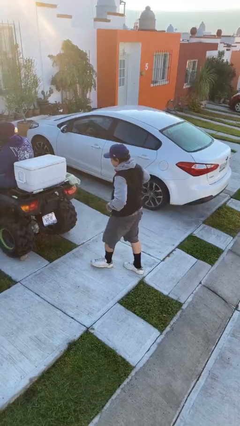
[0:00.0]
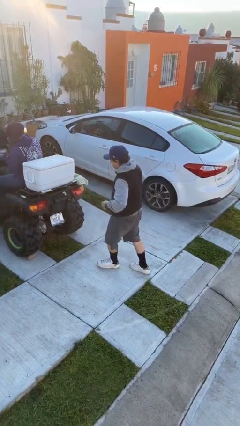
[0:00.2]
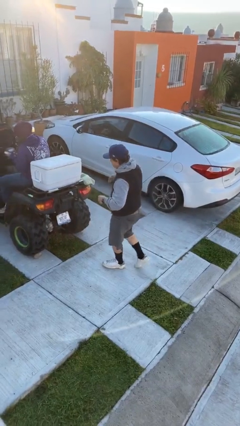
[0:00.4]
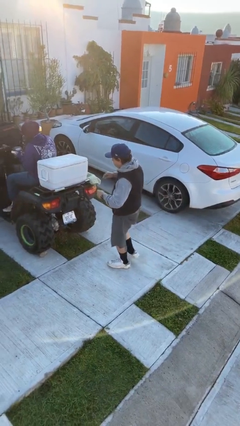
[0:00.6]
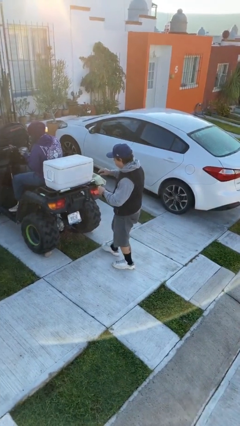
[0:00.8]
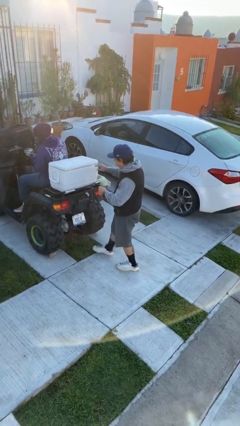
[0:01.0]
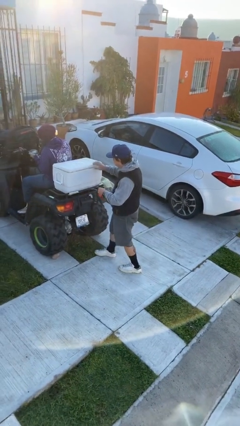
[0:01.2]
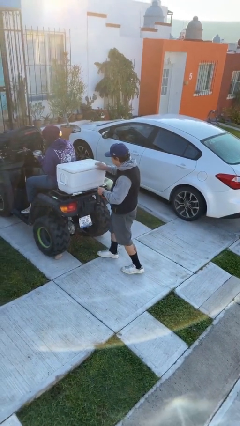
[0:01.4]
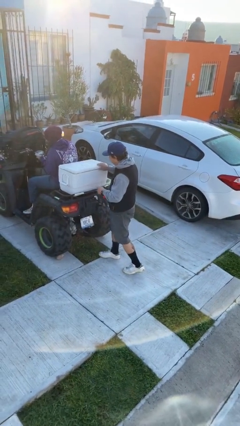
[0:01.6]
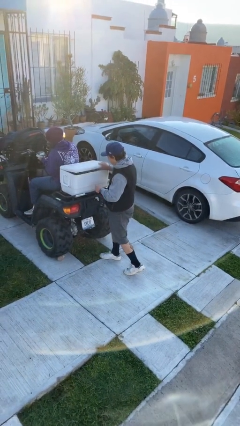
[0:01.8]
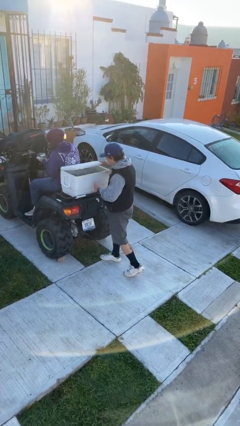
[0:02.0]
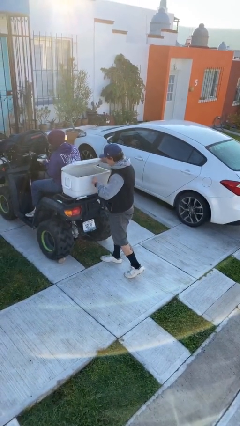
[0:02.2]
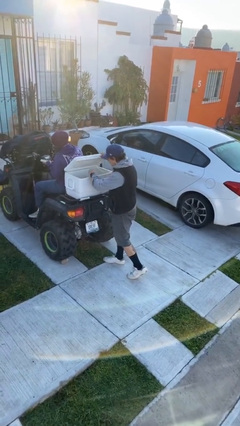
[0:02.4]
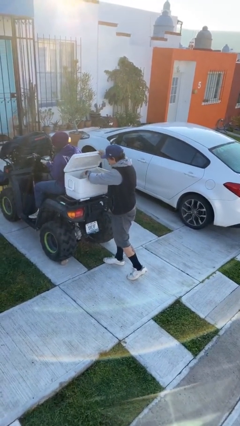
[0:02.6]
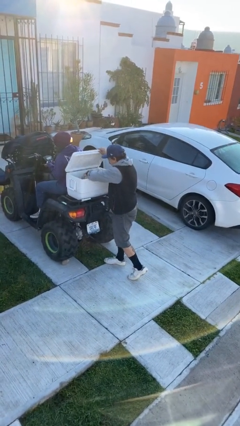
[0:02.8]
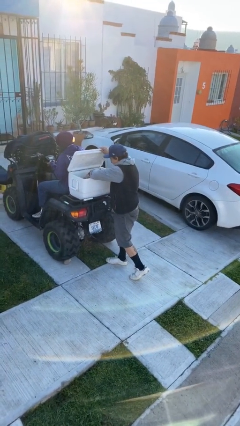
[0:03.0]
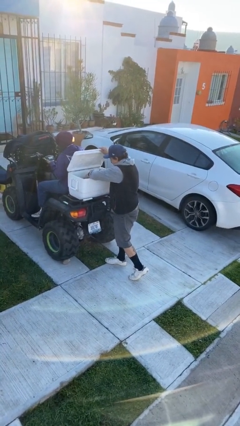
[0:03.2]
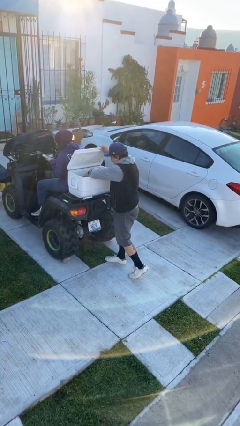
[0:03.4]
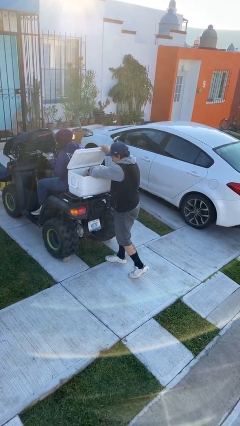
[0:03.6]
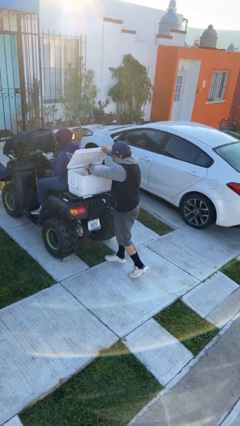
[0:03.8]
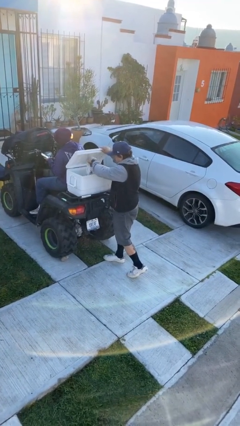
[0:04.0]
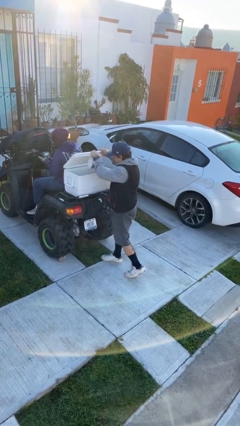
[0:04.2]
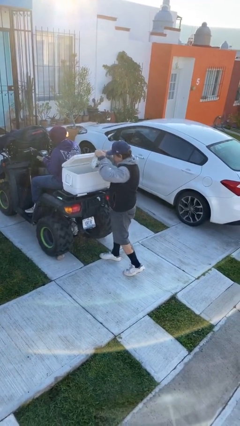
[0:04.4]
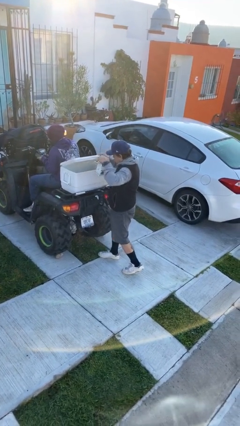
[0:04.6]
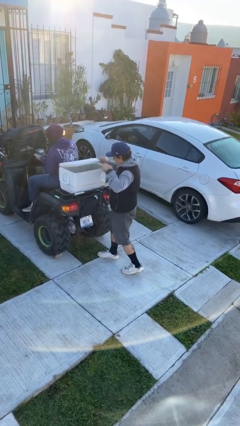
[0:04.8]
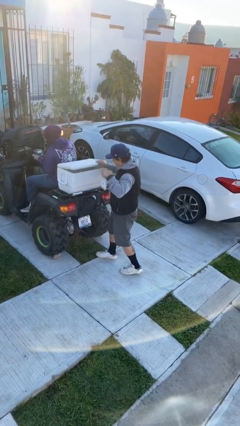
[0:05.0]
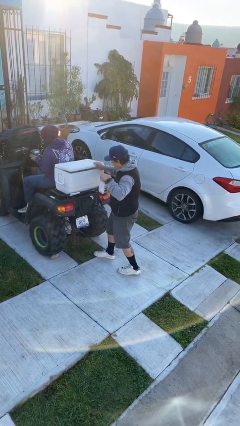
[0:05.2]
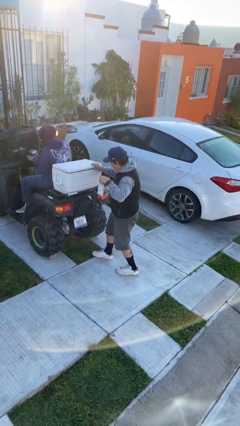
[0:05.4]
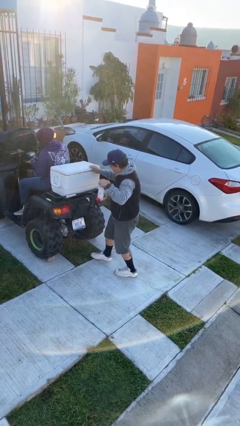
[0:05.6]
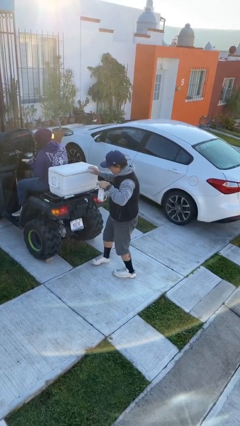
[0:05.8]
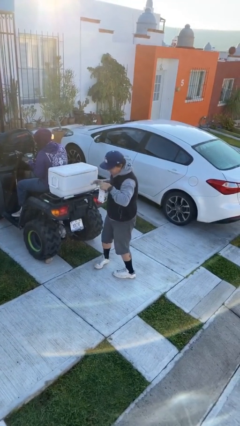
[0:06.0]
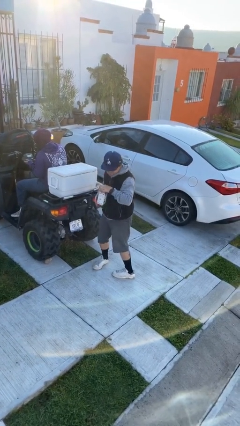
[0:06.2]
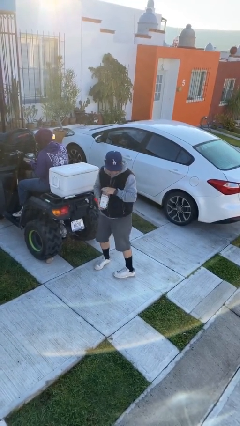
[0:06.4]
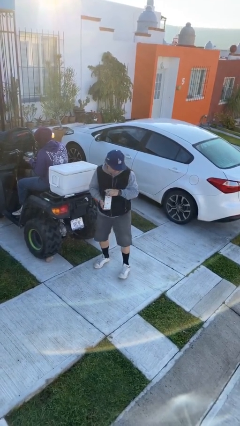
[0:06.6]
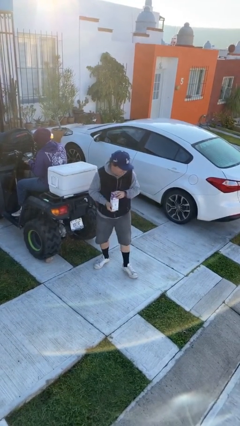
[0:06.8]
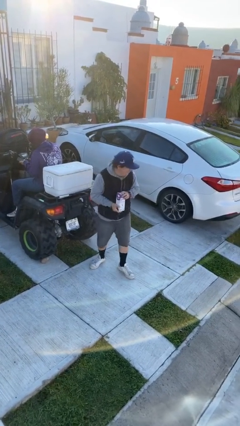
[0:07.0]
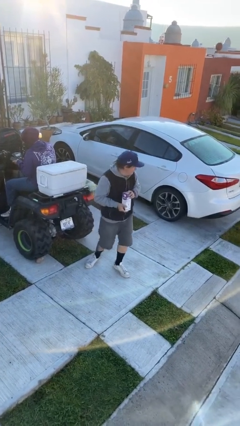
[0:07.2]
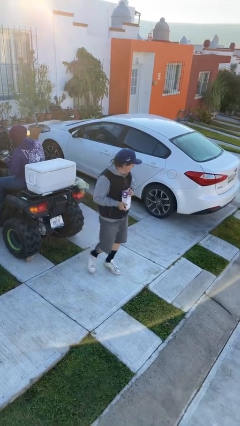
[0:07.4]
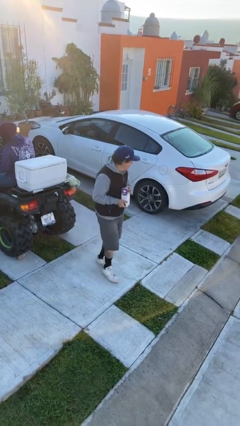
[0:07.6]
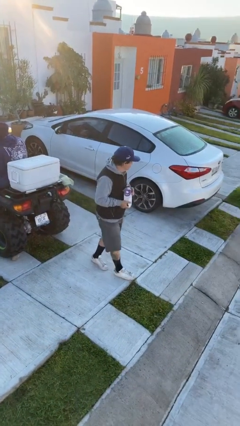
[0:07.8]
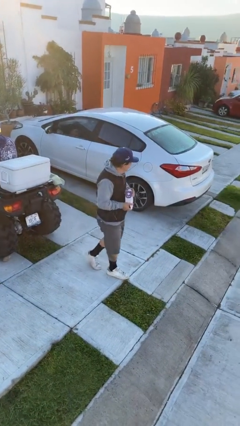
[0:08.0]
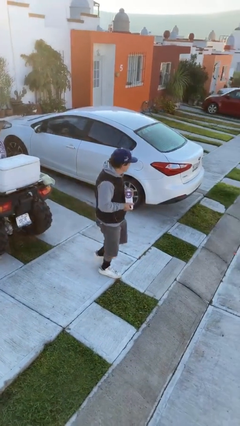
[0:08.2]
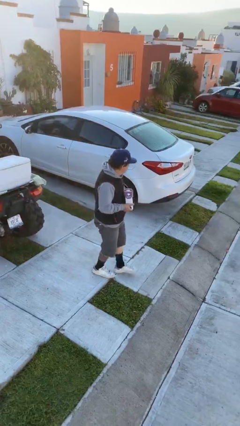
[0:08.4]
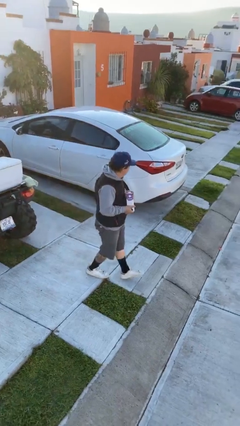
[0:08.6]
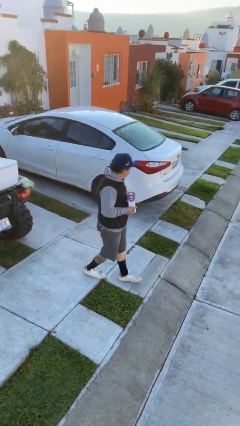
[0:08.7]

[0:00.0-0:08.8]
person steals object from person

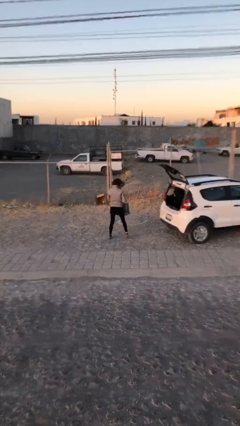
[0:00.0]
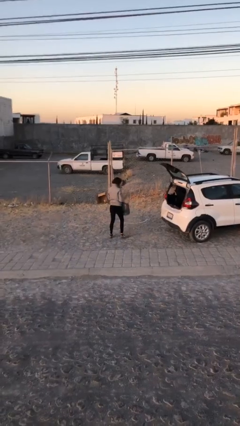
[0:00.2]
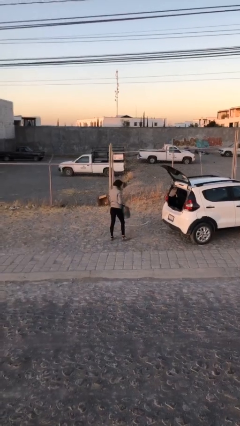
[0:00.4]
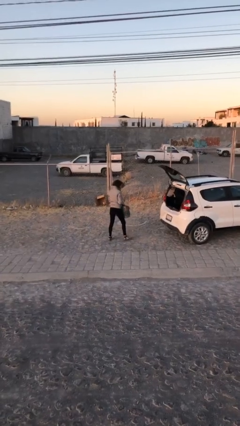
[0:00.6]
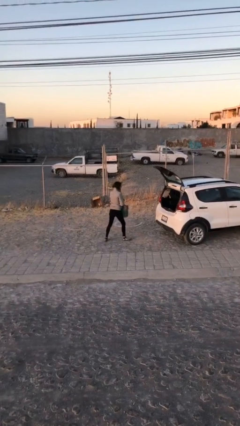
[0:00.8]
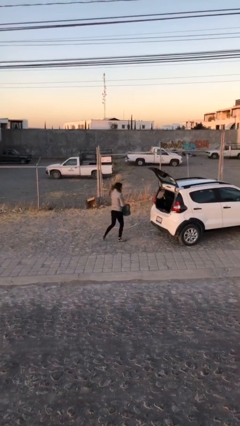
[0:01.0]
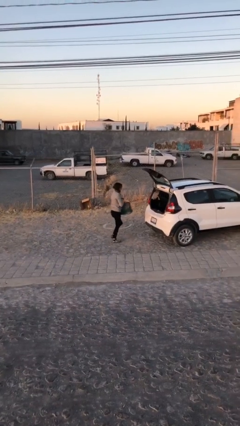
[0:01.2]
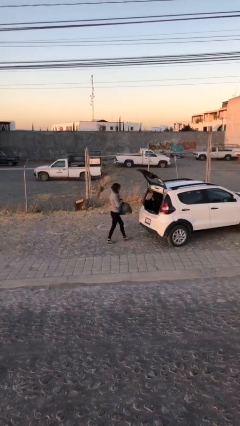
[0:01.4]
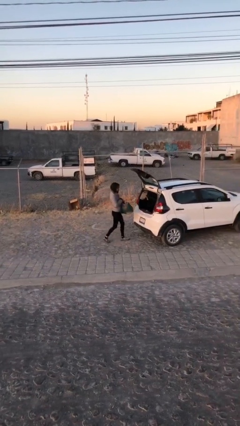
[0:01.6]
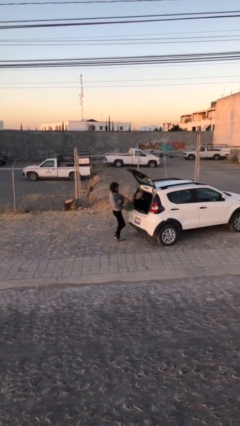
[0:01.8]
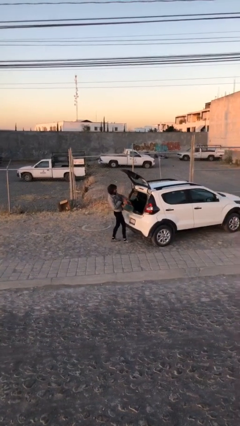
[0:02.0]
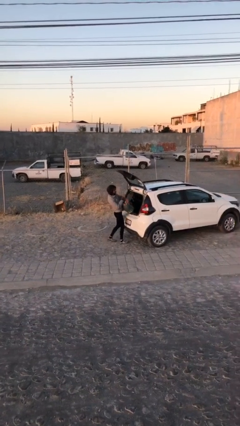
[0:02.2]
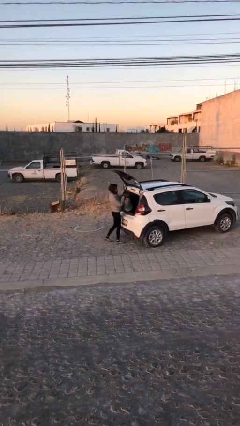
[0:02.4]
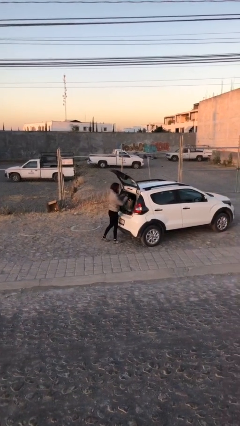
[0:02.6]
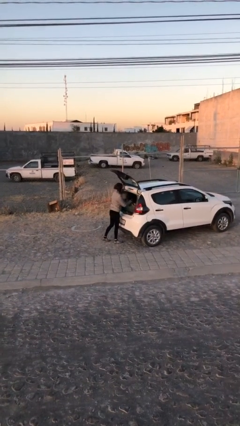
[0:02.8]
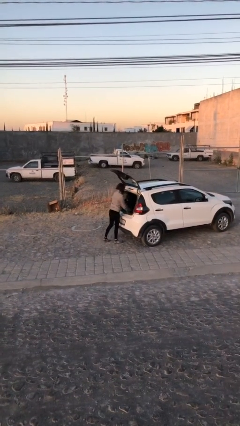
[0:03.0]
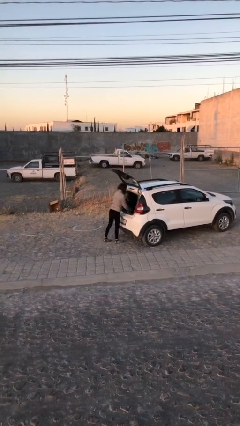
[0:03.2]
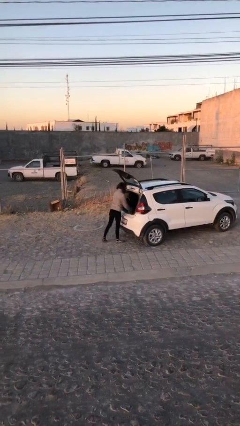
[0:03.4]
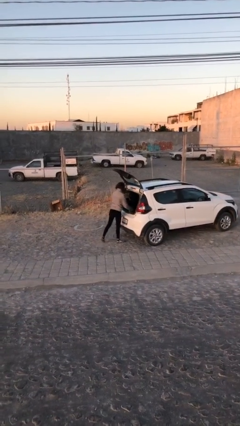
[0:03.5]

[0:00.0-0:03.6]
person loads car

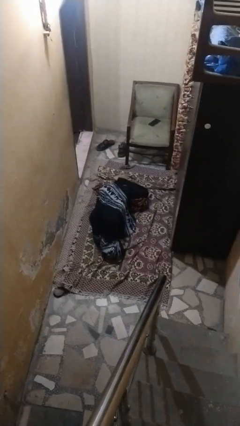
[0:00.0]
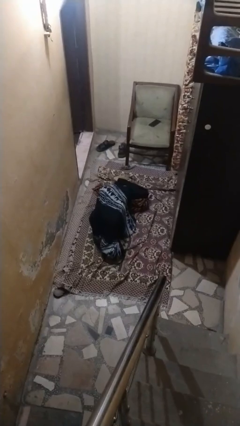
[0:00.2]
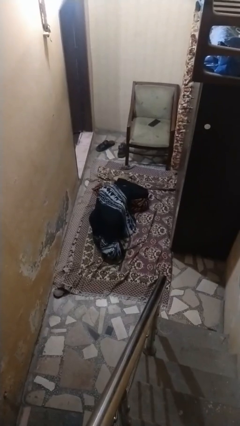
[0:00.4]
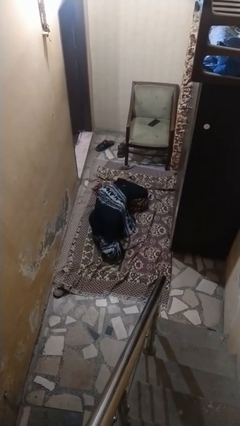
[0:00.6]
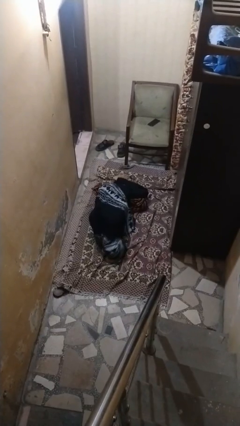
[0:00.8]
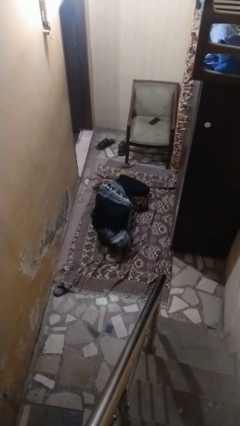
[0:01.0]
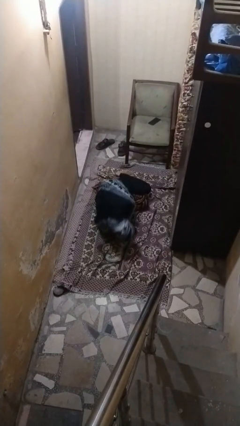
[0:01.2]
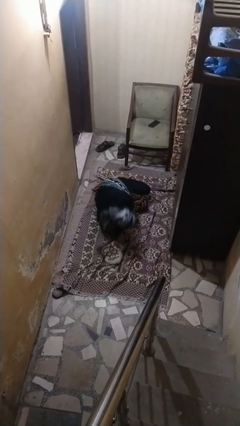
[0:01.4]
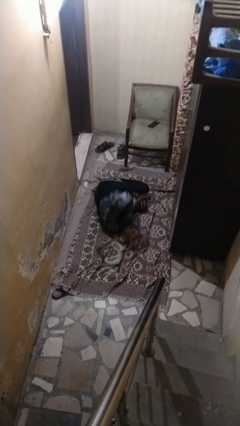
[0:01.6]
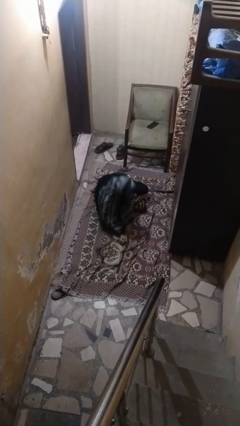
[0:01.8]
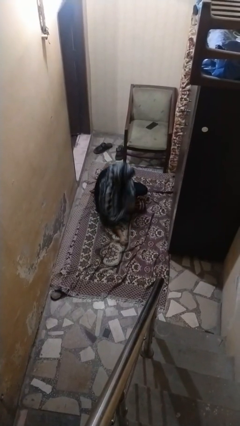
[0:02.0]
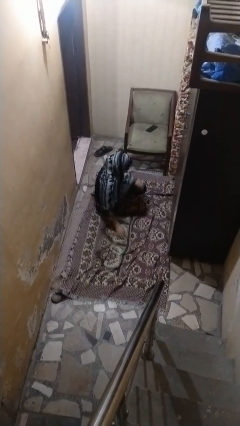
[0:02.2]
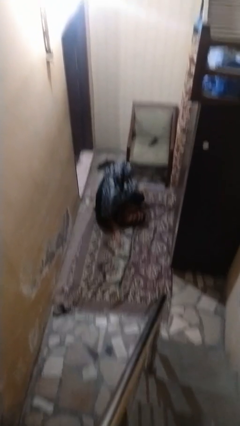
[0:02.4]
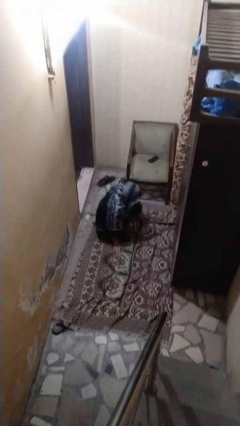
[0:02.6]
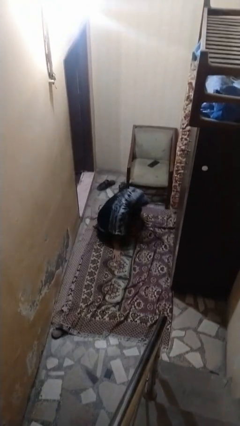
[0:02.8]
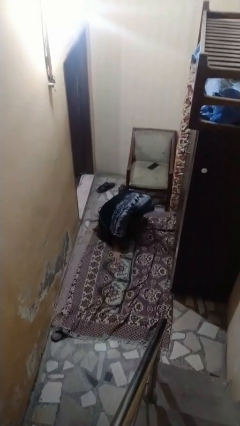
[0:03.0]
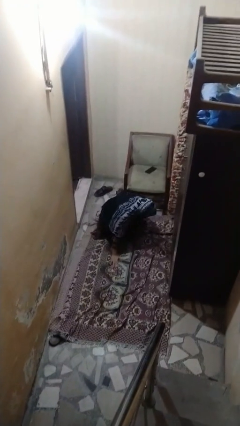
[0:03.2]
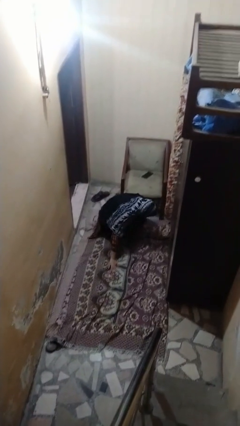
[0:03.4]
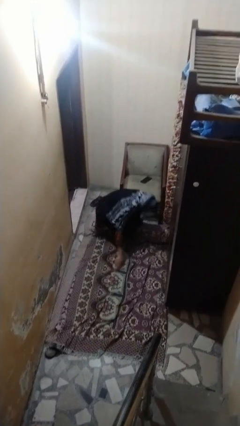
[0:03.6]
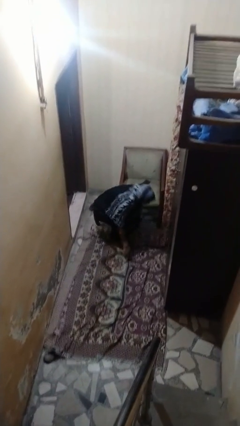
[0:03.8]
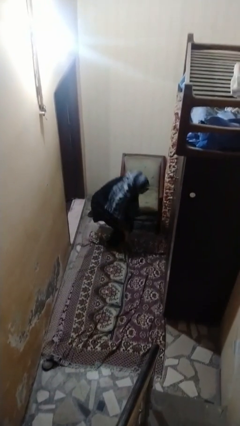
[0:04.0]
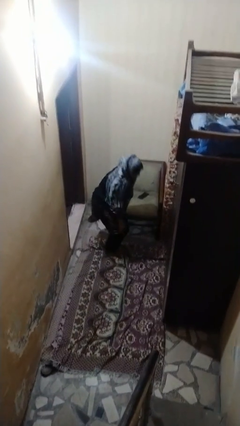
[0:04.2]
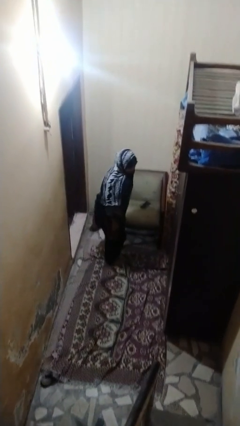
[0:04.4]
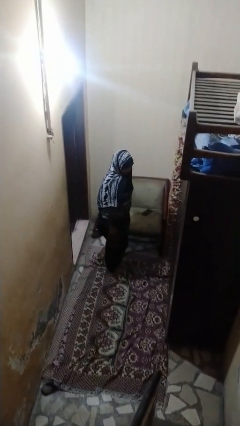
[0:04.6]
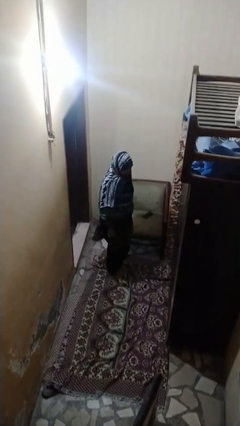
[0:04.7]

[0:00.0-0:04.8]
person stands up from floor

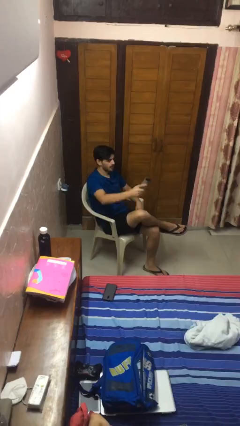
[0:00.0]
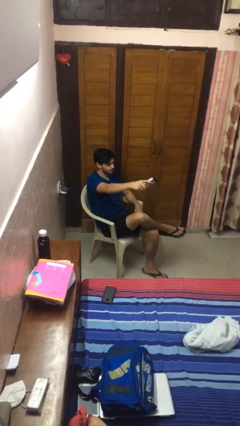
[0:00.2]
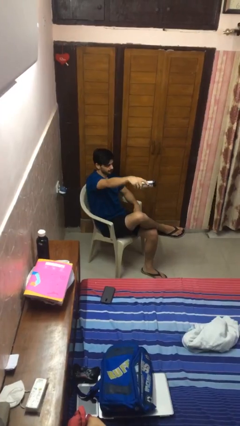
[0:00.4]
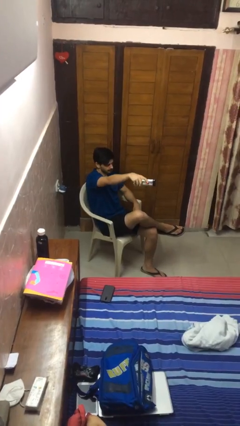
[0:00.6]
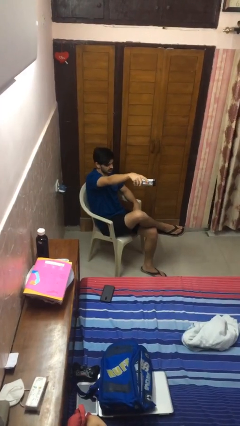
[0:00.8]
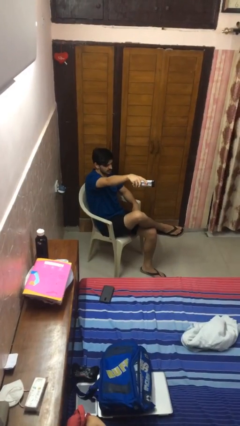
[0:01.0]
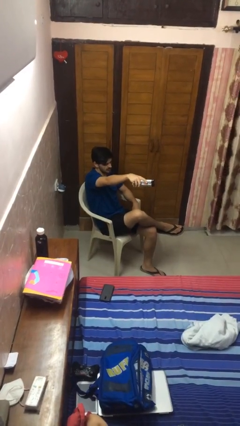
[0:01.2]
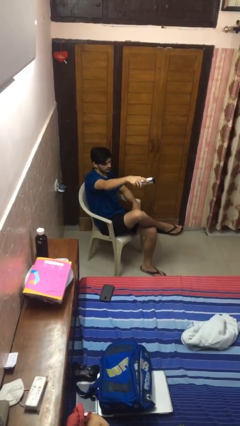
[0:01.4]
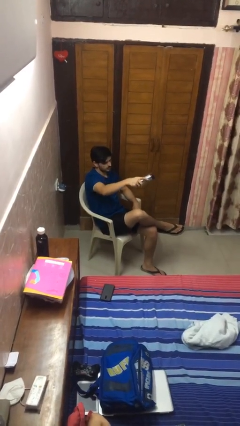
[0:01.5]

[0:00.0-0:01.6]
person uses television remote
